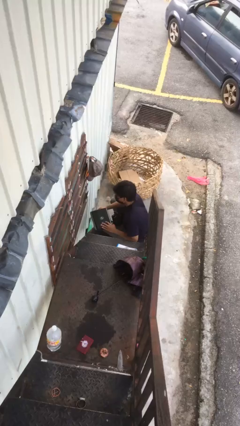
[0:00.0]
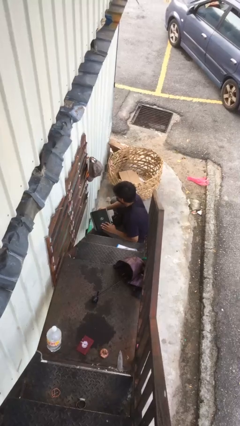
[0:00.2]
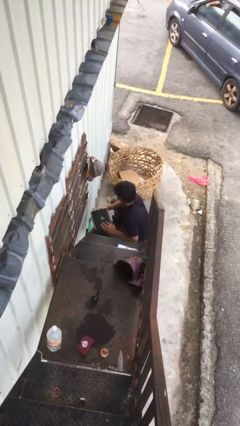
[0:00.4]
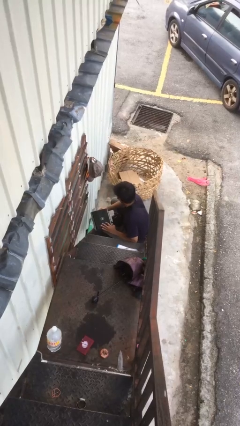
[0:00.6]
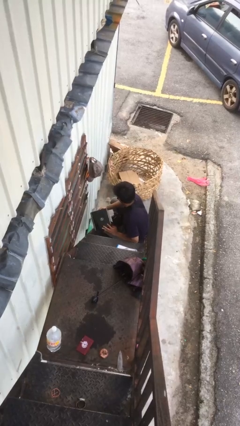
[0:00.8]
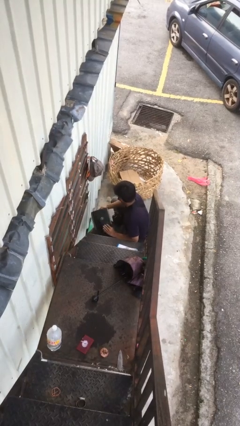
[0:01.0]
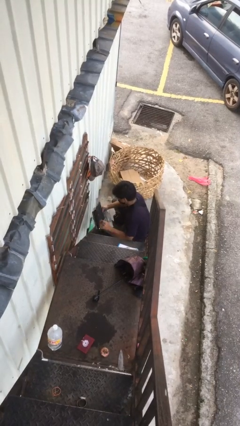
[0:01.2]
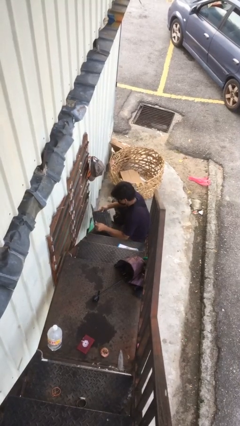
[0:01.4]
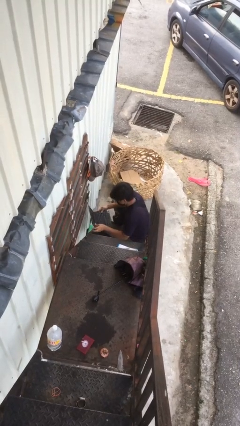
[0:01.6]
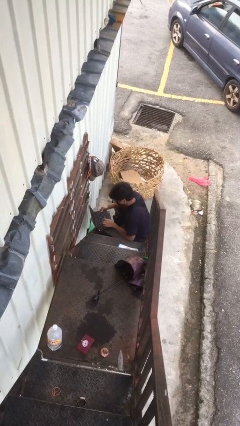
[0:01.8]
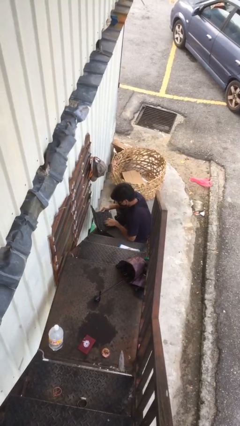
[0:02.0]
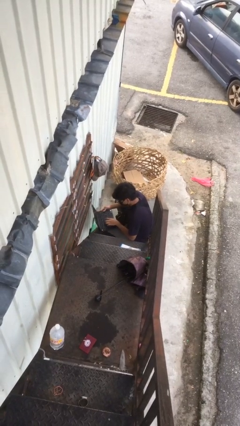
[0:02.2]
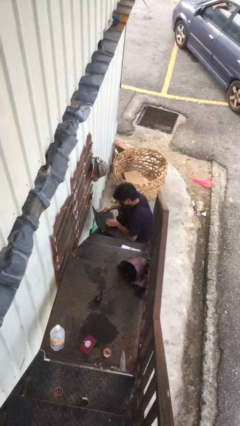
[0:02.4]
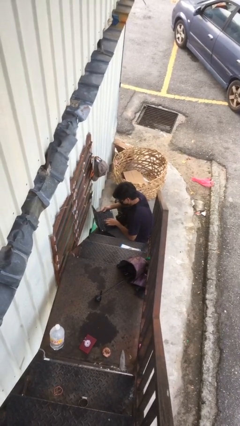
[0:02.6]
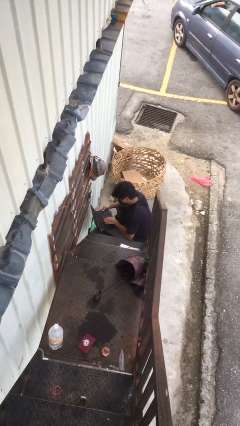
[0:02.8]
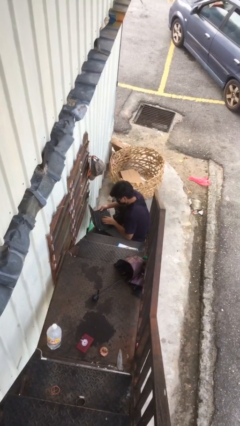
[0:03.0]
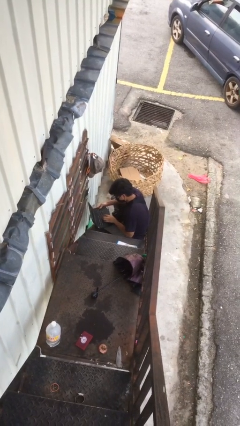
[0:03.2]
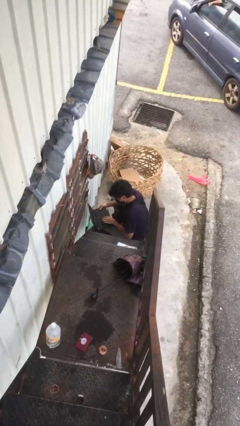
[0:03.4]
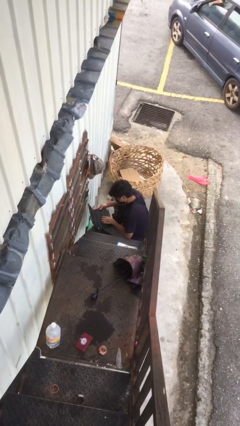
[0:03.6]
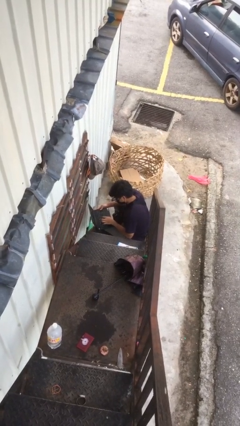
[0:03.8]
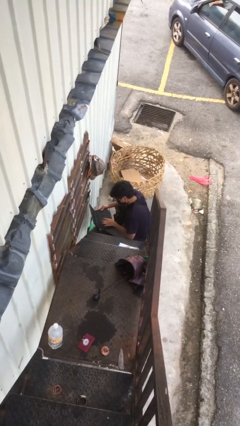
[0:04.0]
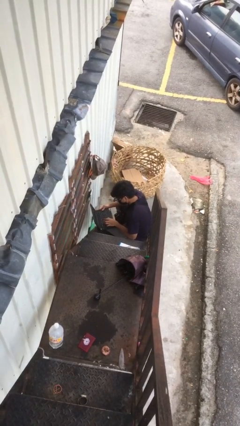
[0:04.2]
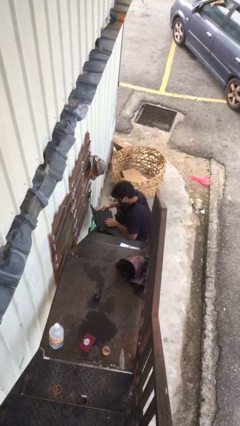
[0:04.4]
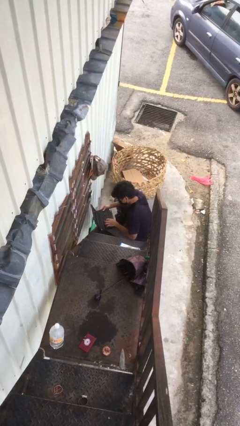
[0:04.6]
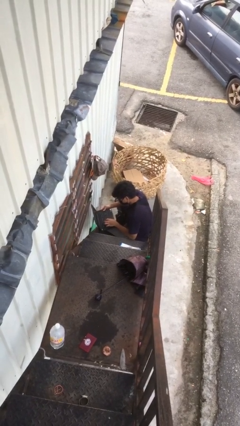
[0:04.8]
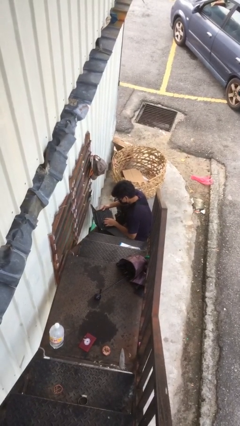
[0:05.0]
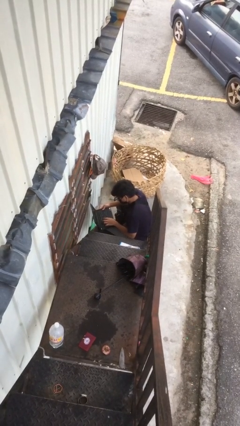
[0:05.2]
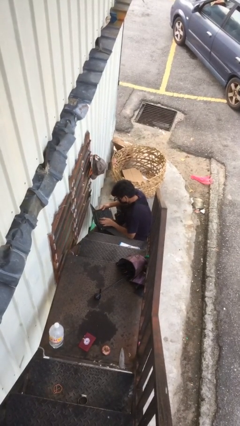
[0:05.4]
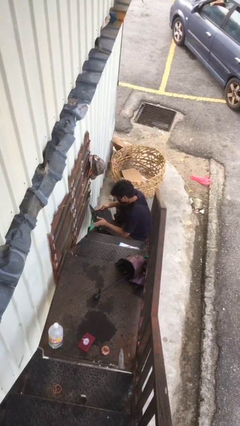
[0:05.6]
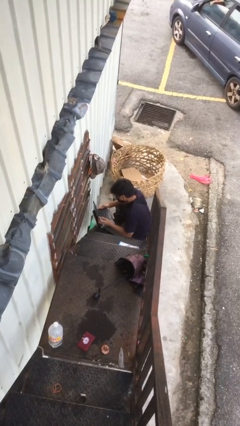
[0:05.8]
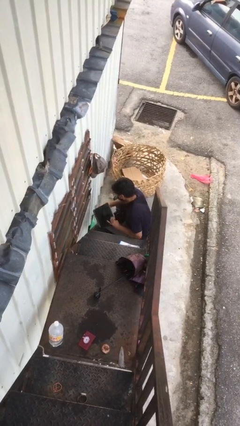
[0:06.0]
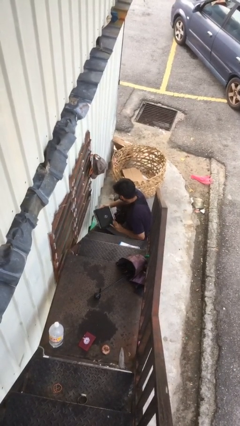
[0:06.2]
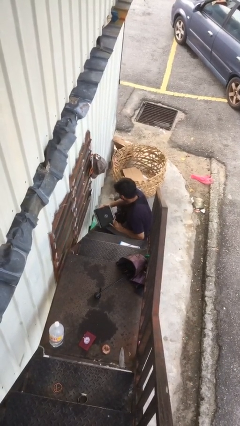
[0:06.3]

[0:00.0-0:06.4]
person interacts with laptop

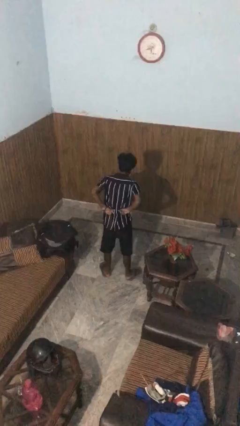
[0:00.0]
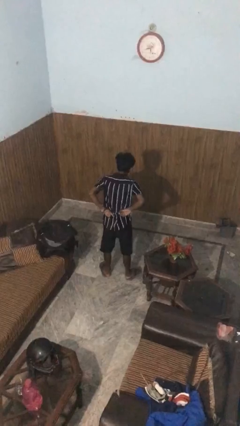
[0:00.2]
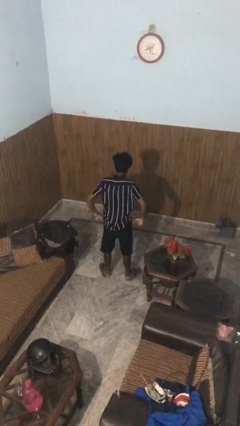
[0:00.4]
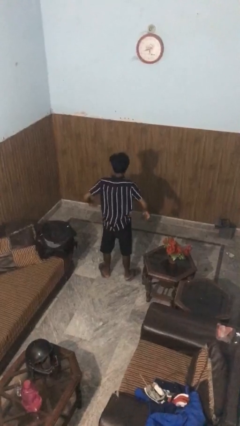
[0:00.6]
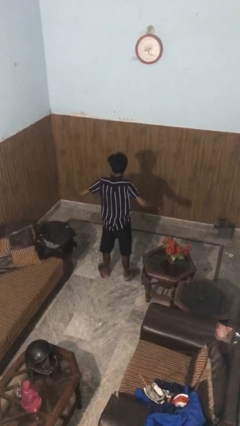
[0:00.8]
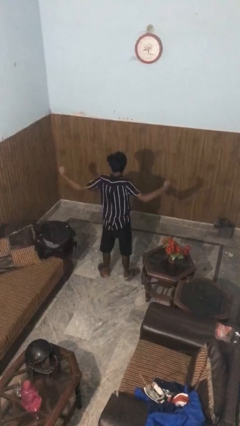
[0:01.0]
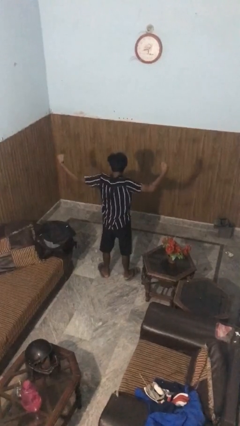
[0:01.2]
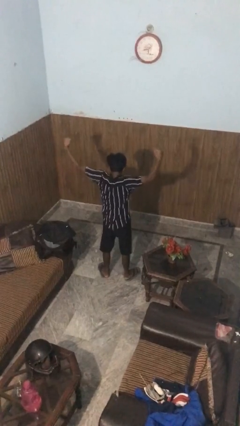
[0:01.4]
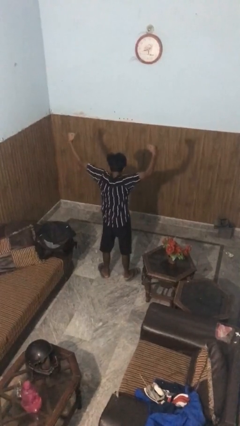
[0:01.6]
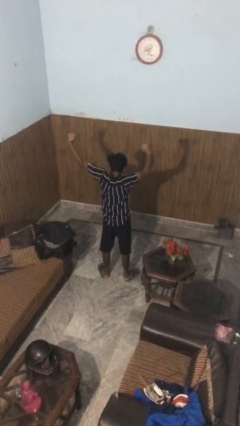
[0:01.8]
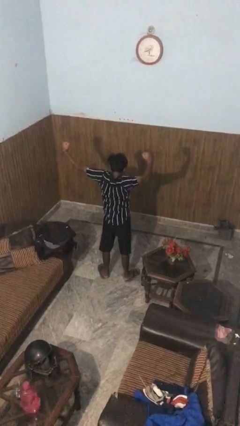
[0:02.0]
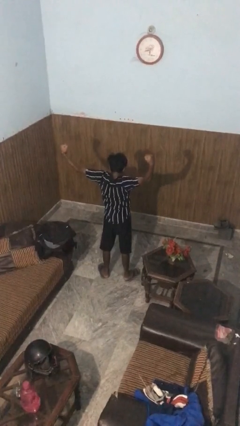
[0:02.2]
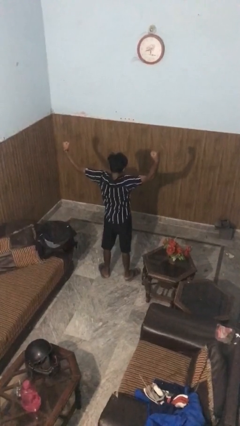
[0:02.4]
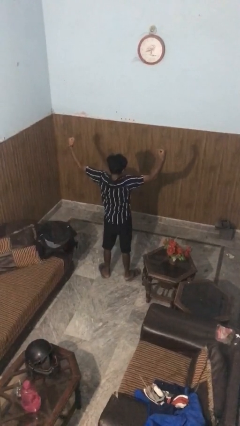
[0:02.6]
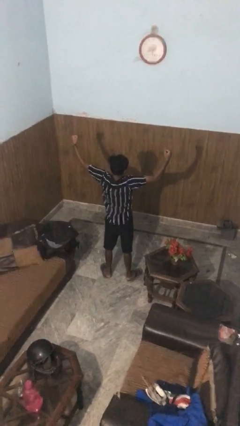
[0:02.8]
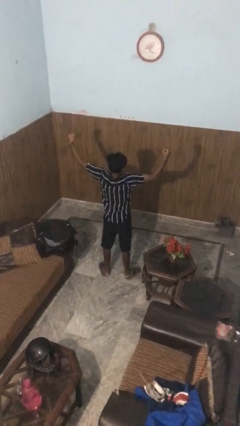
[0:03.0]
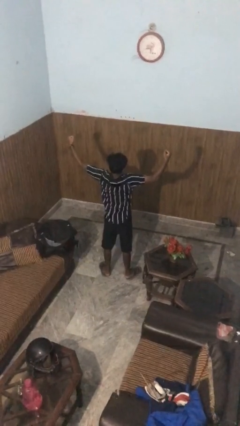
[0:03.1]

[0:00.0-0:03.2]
person stretches arms to side

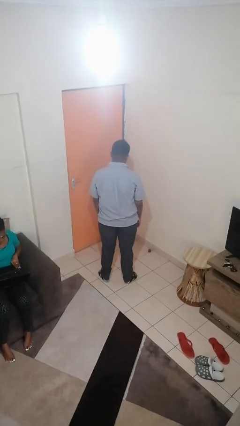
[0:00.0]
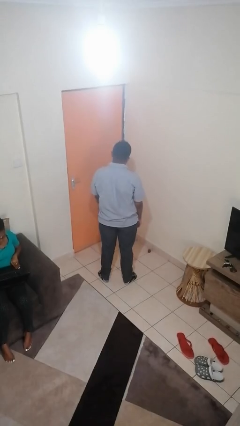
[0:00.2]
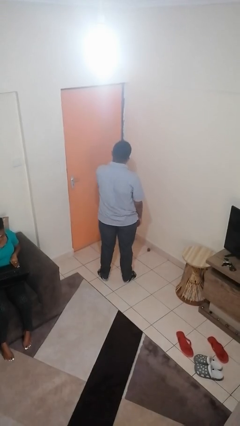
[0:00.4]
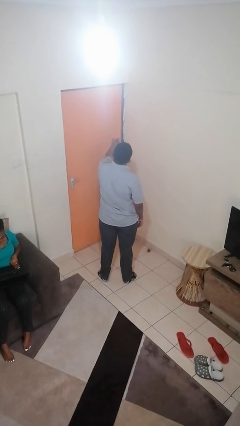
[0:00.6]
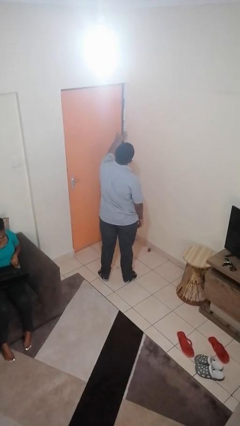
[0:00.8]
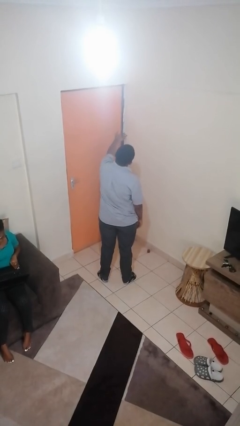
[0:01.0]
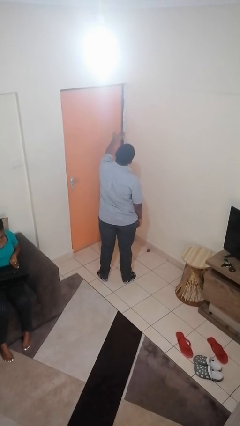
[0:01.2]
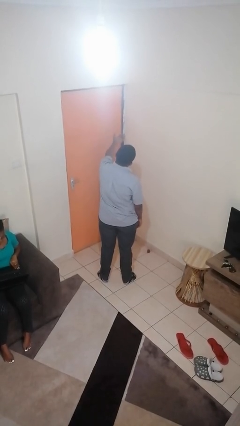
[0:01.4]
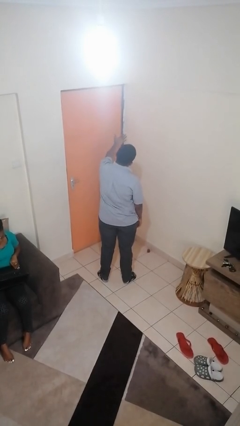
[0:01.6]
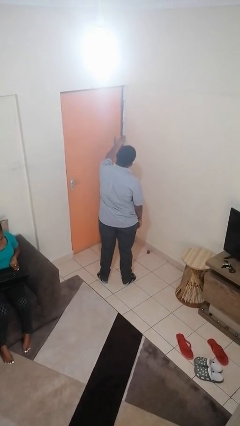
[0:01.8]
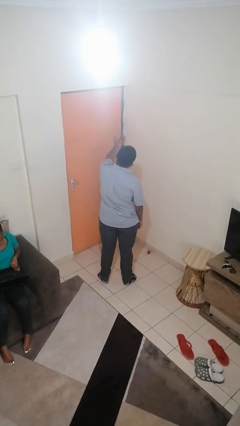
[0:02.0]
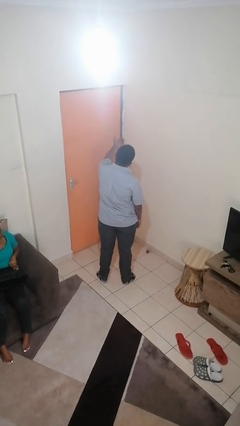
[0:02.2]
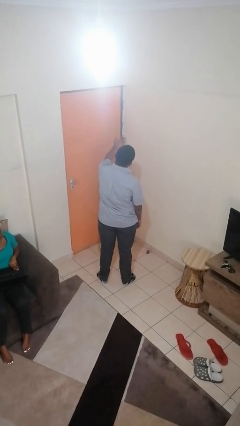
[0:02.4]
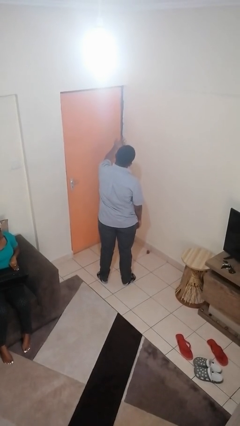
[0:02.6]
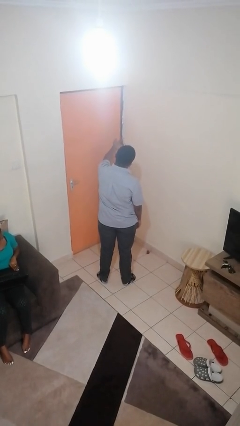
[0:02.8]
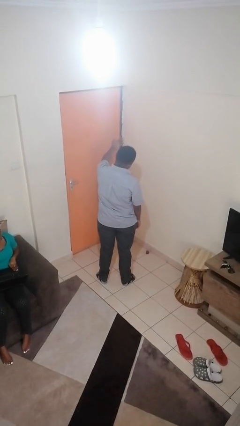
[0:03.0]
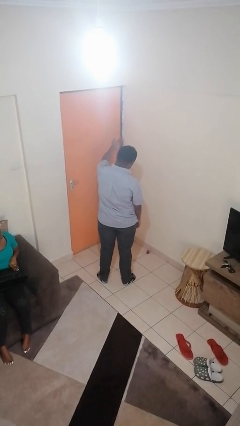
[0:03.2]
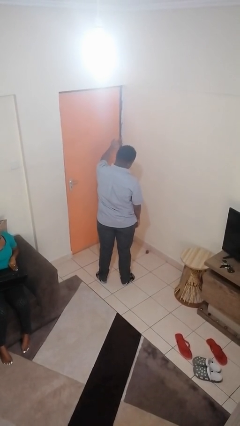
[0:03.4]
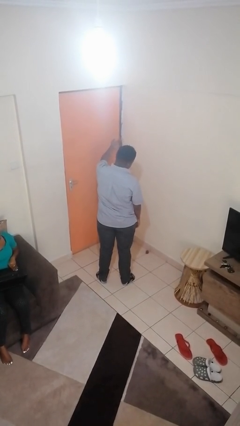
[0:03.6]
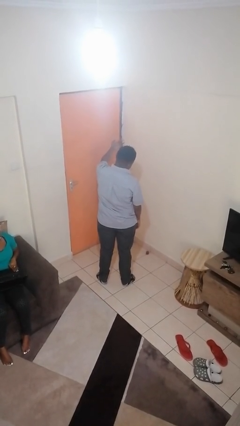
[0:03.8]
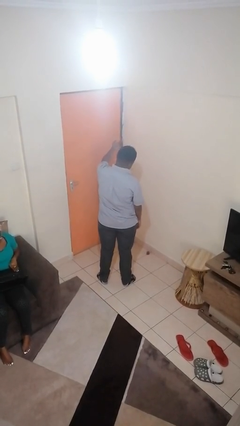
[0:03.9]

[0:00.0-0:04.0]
person gestures come here

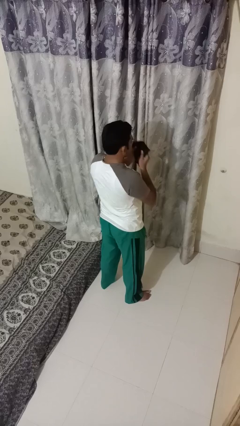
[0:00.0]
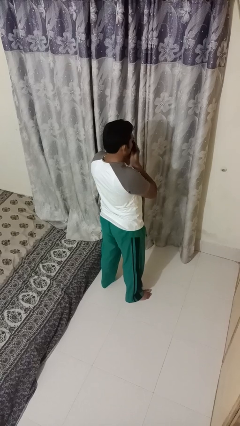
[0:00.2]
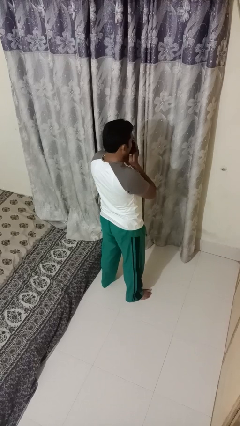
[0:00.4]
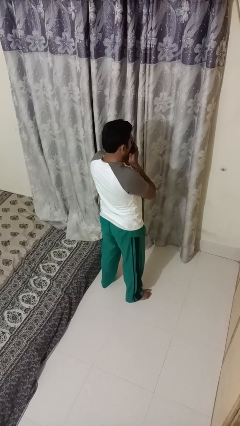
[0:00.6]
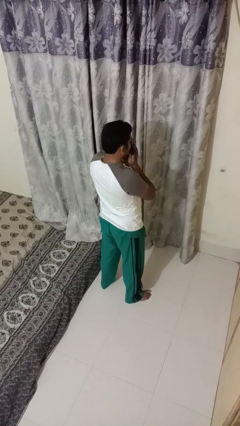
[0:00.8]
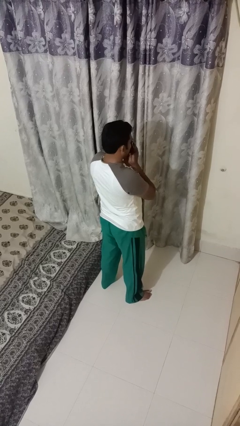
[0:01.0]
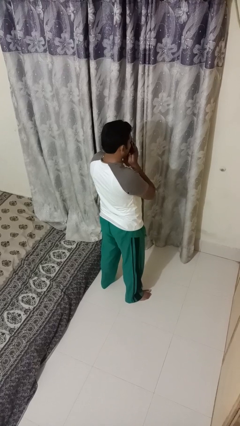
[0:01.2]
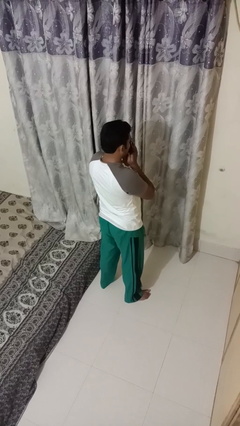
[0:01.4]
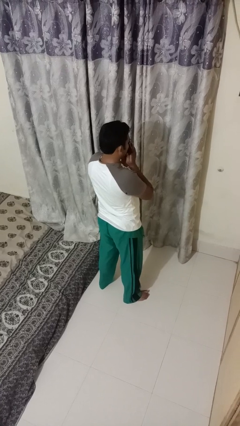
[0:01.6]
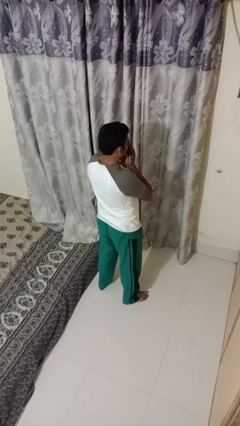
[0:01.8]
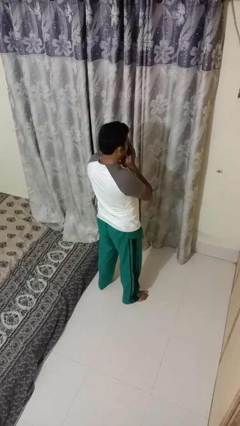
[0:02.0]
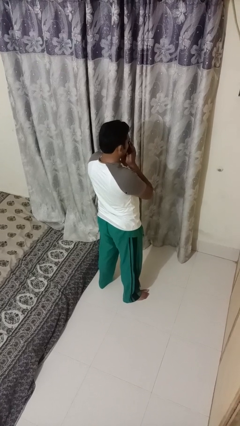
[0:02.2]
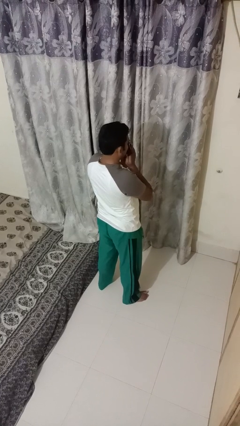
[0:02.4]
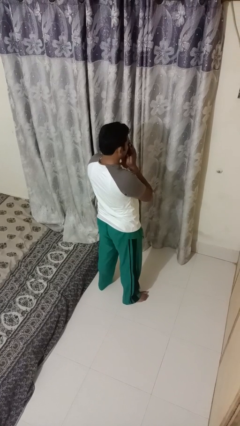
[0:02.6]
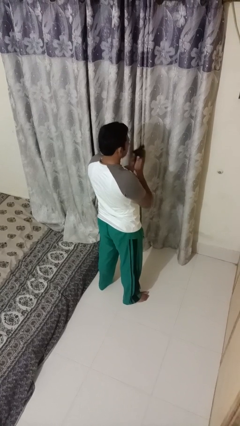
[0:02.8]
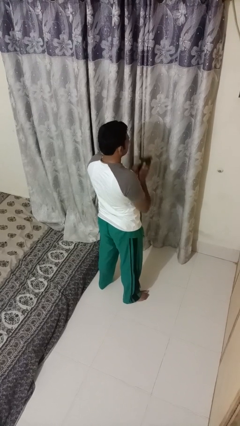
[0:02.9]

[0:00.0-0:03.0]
person blows nose

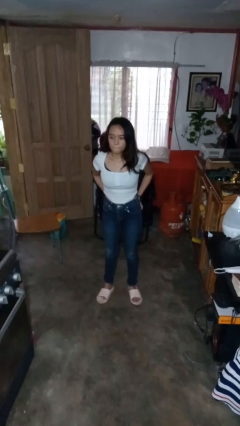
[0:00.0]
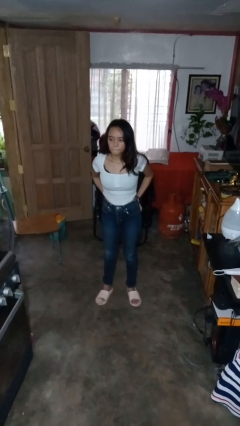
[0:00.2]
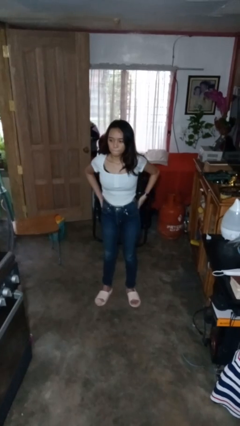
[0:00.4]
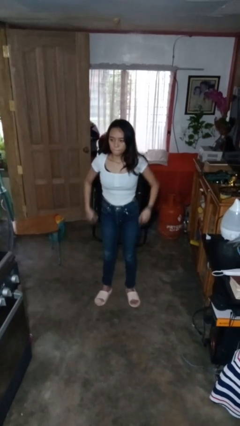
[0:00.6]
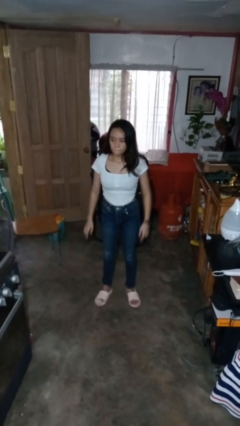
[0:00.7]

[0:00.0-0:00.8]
person puts hands in back pockets
